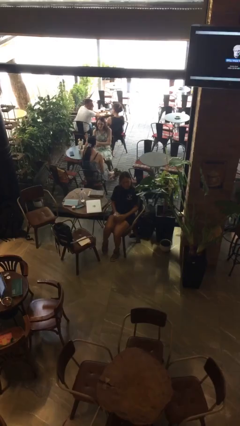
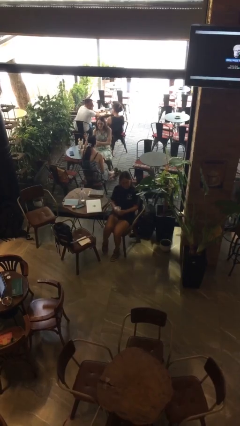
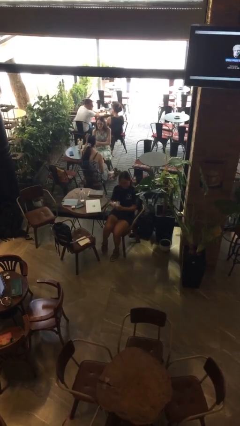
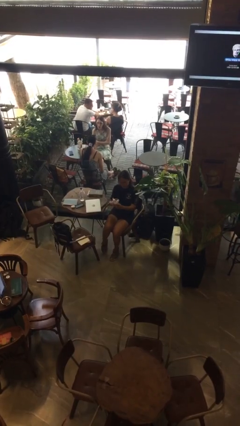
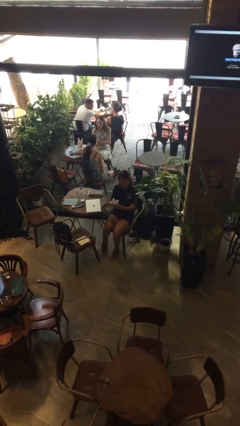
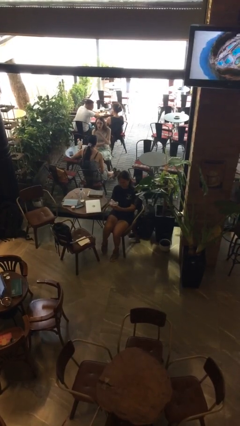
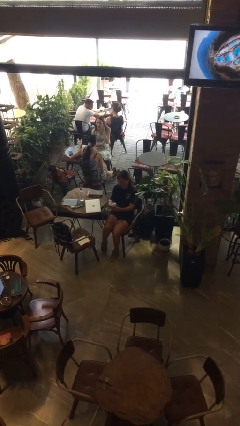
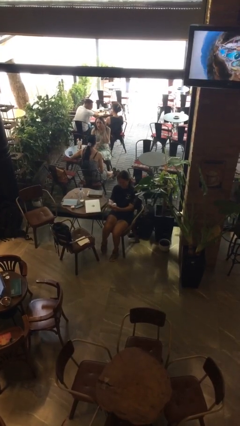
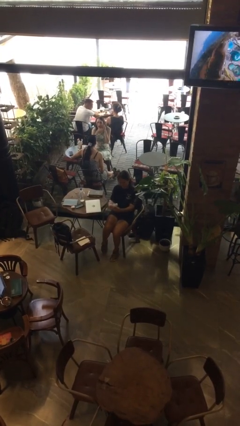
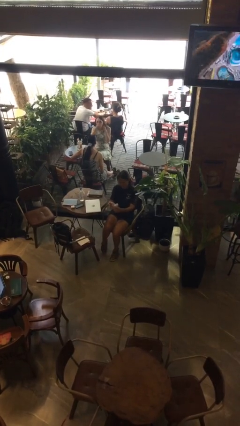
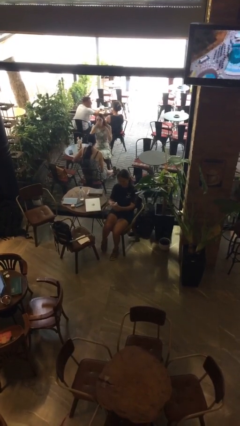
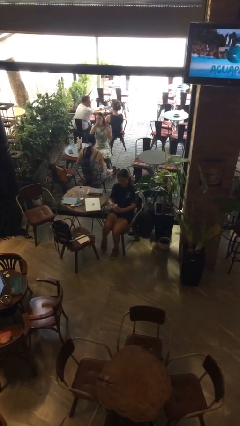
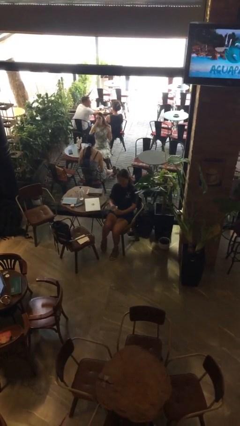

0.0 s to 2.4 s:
person squeezes object

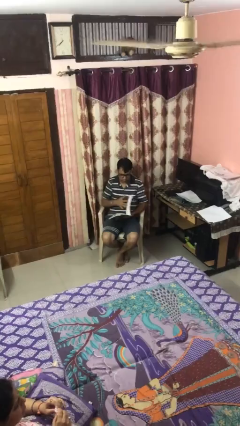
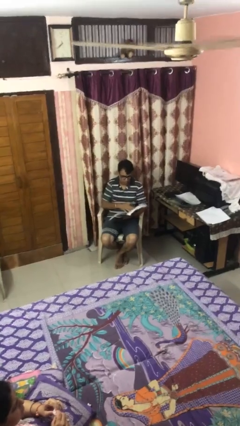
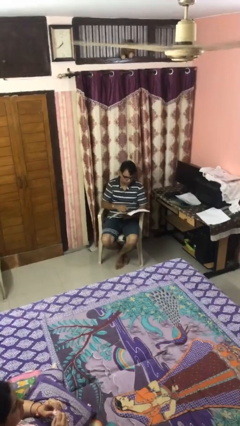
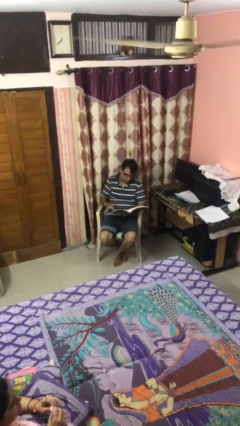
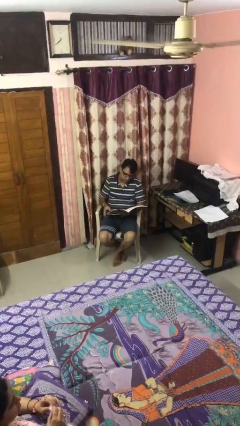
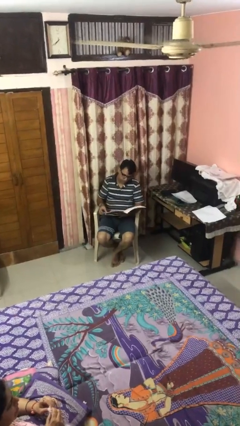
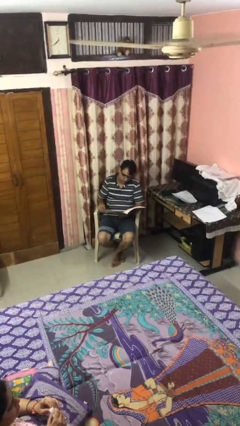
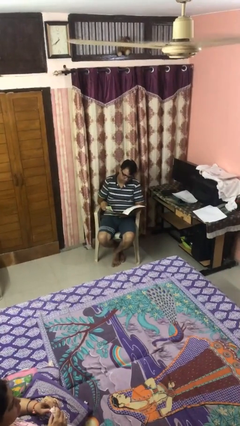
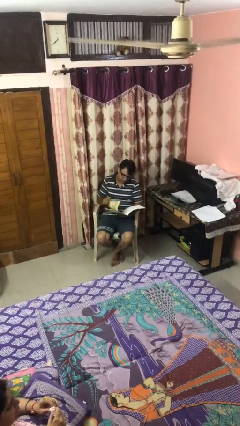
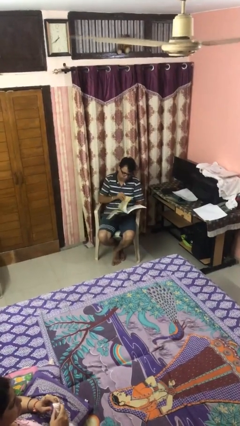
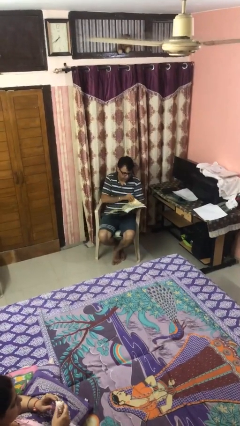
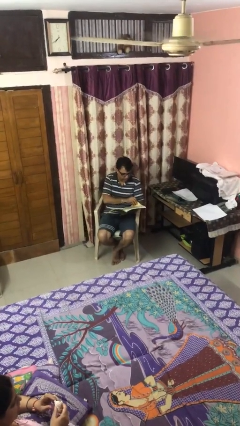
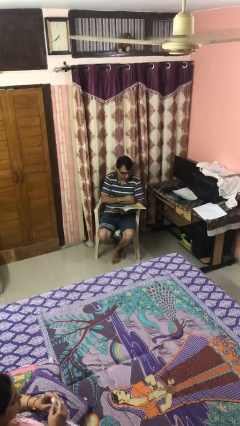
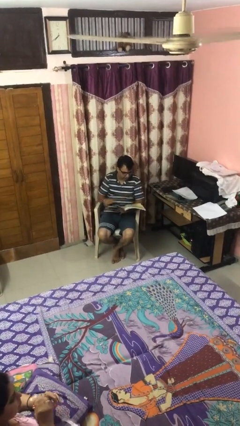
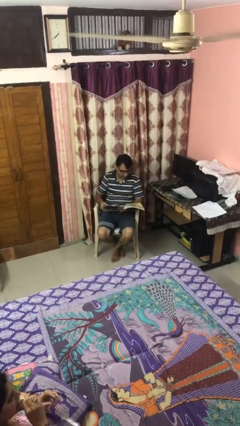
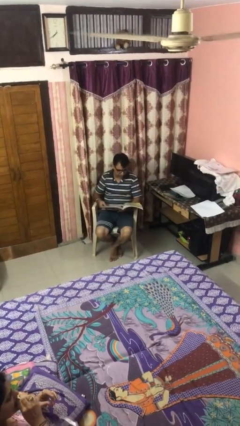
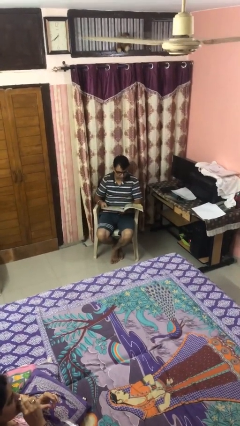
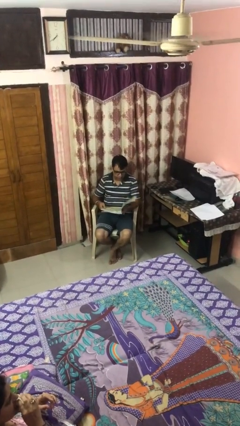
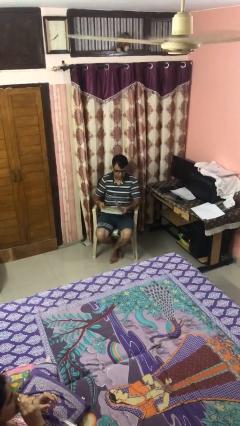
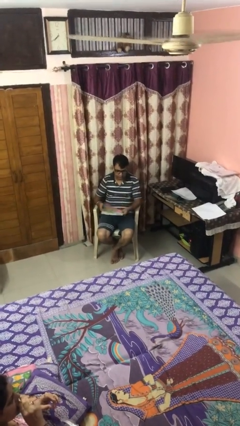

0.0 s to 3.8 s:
person reads magazine

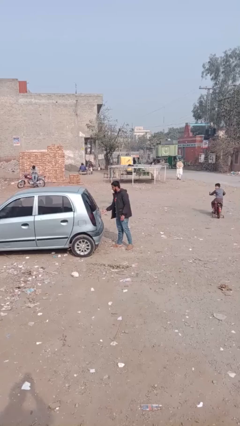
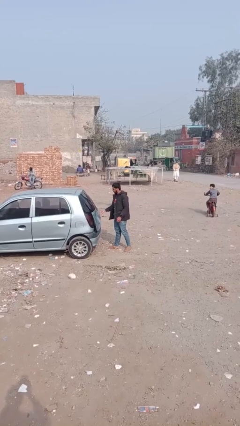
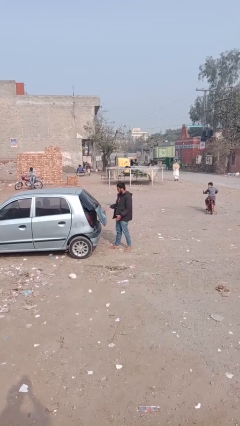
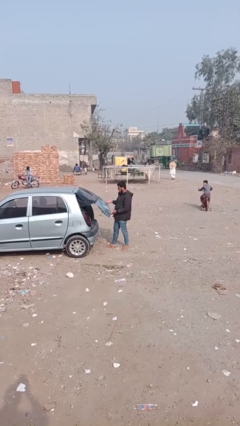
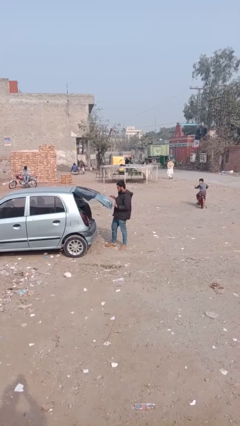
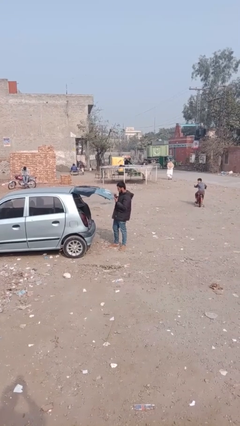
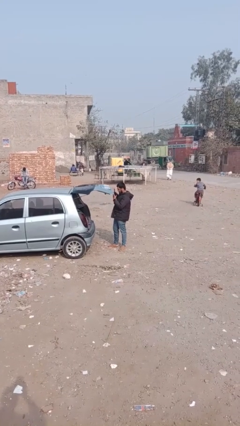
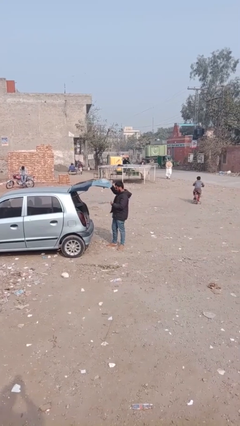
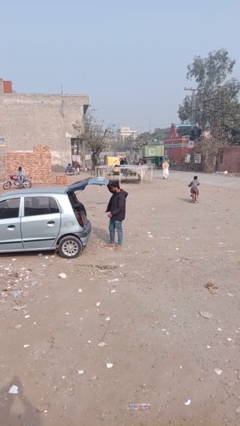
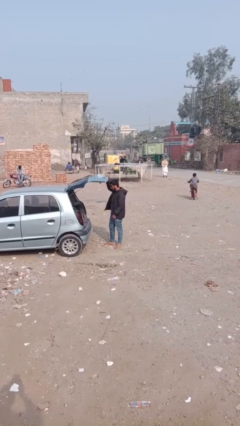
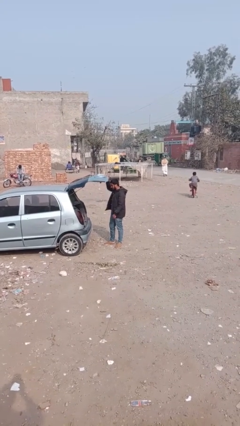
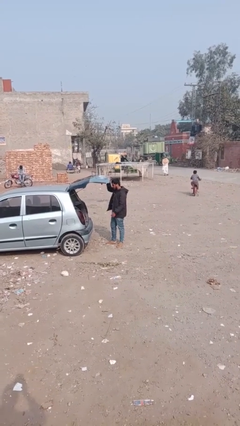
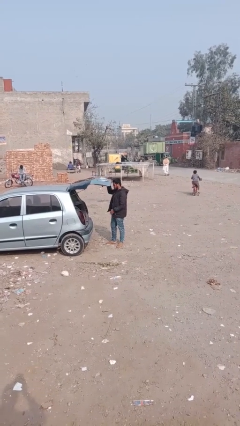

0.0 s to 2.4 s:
person opens car trunk

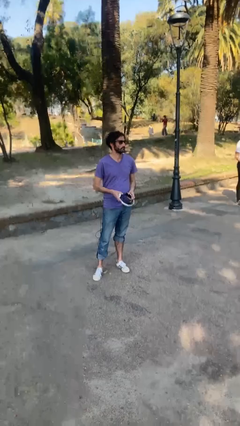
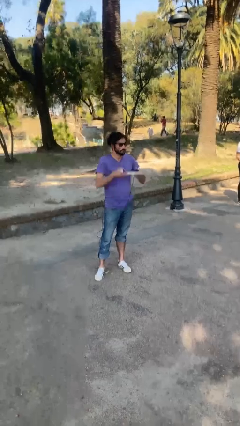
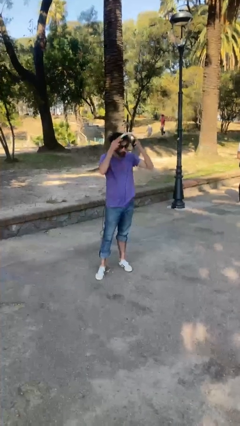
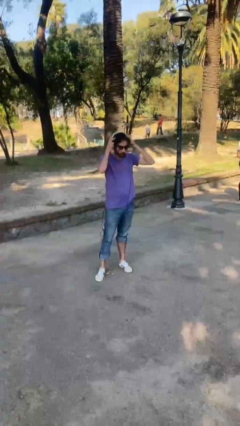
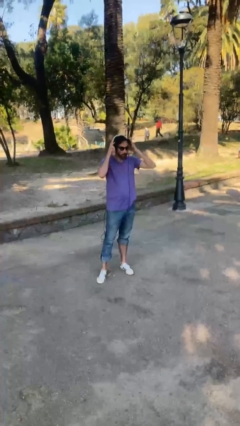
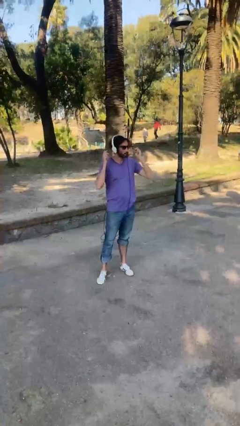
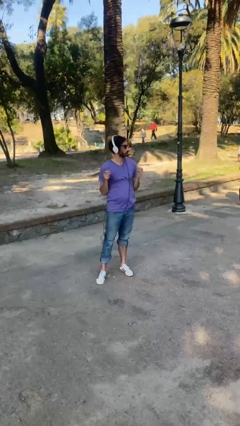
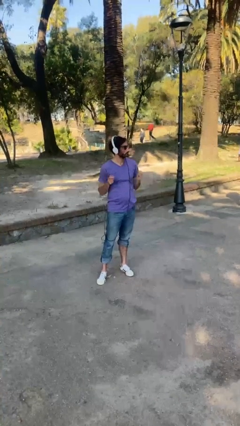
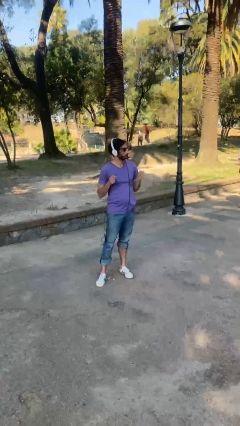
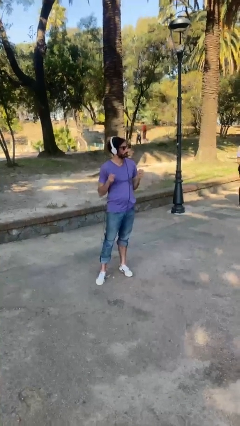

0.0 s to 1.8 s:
person puts on headphones

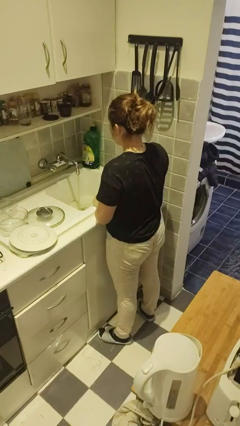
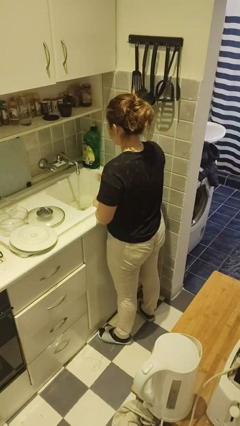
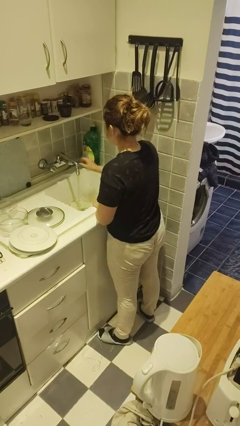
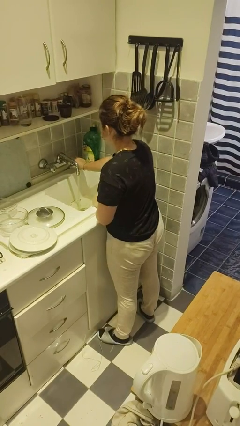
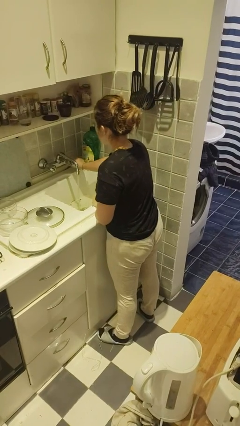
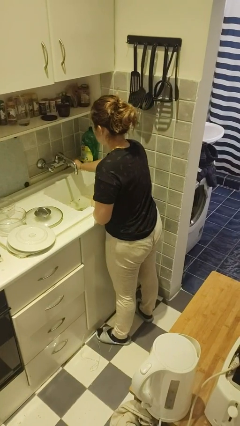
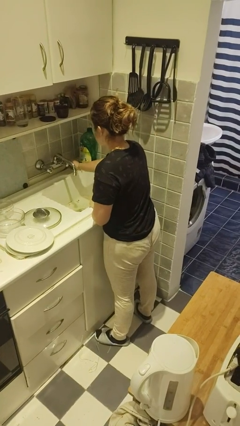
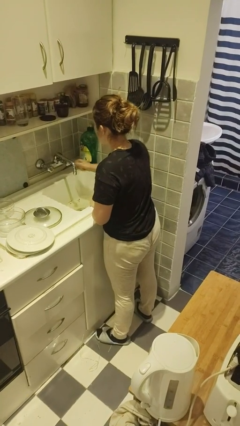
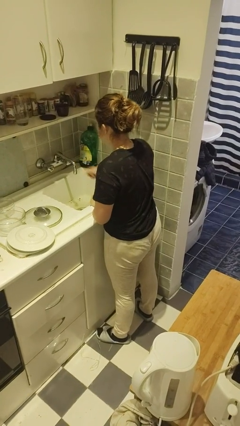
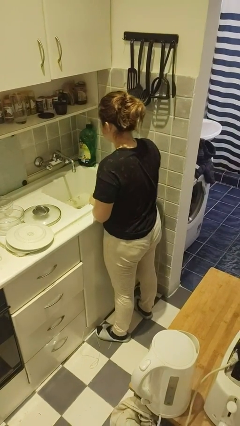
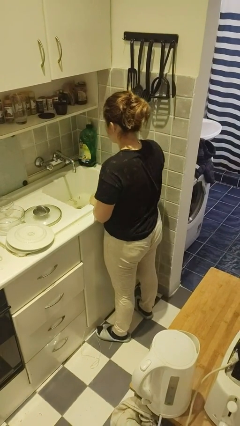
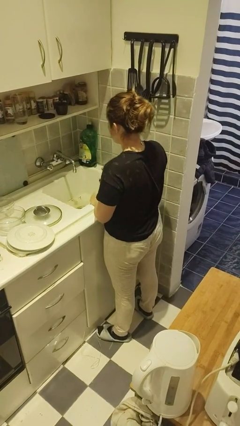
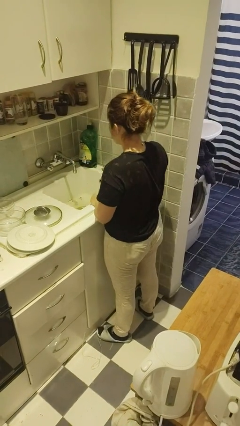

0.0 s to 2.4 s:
person turns off faucet

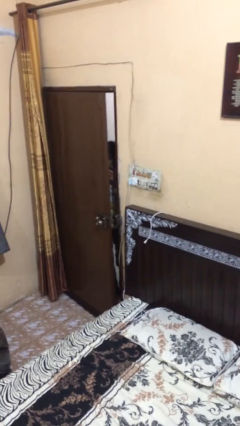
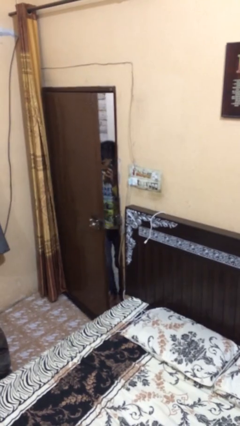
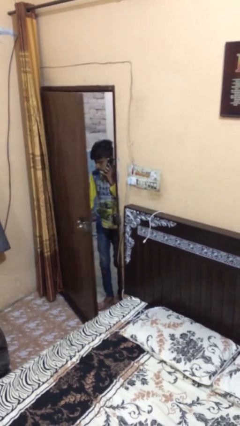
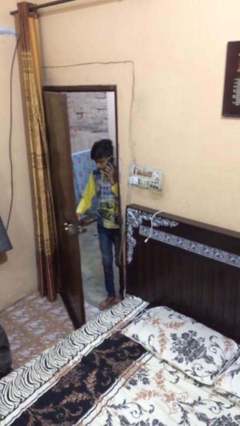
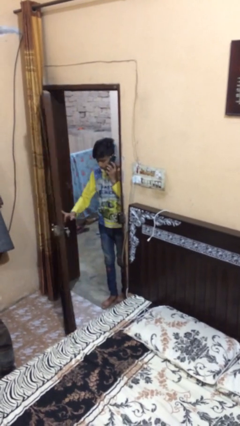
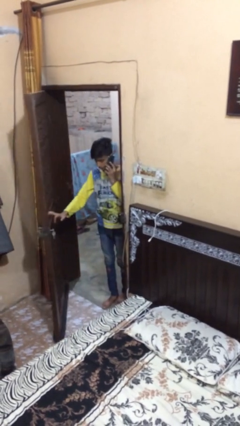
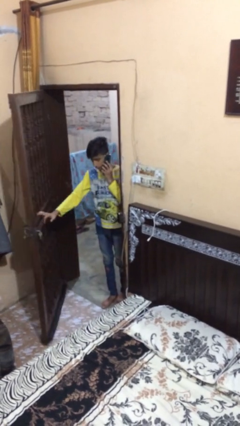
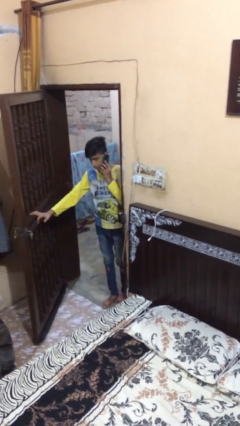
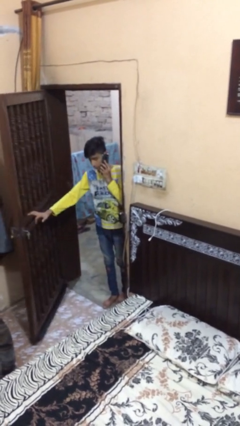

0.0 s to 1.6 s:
person opens facility door

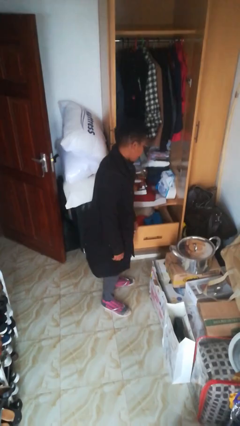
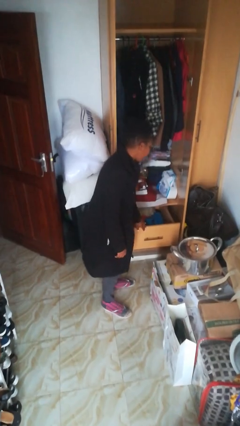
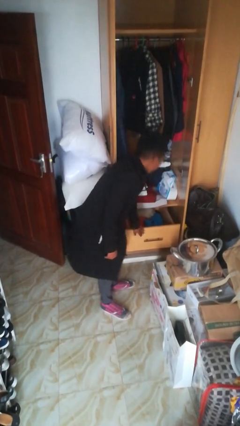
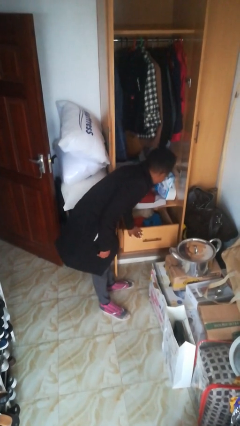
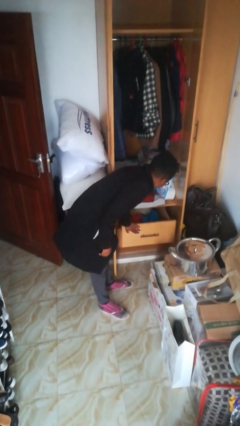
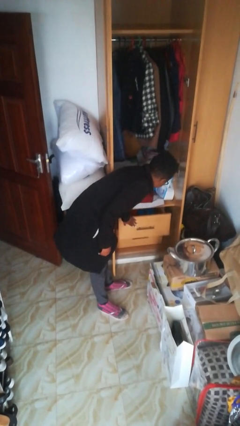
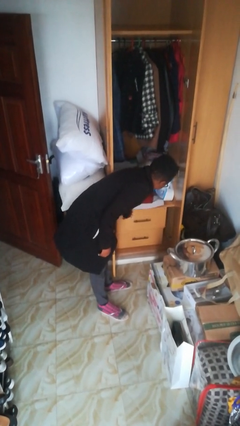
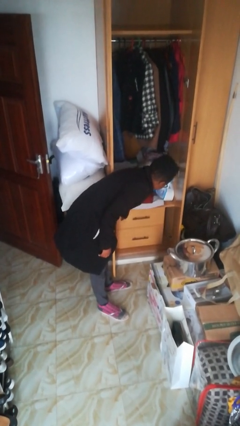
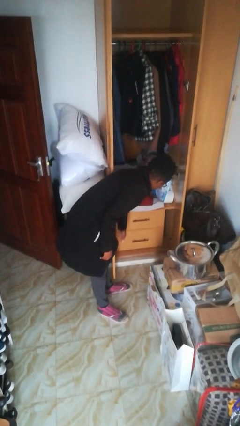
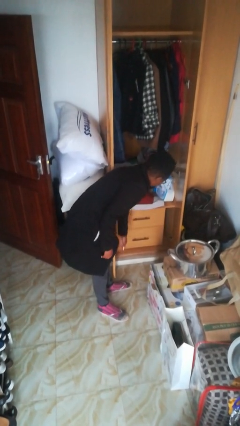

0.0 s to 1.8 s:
person closes dresser drawer

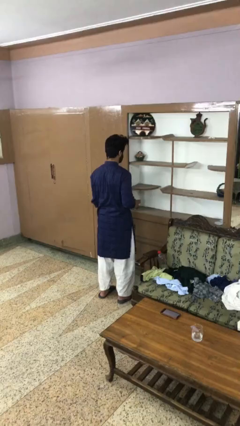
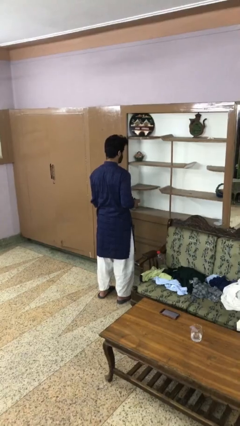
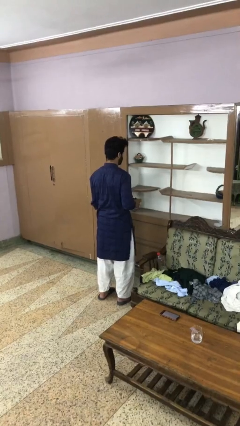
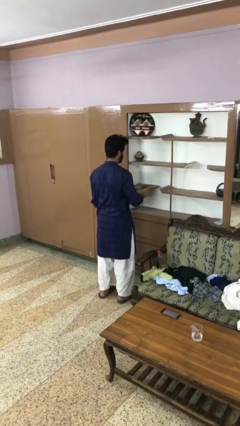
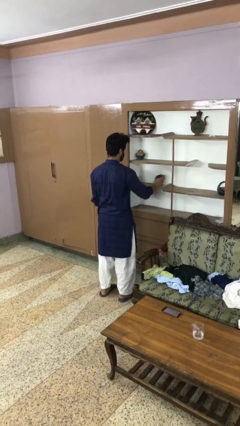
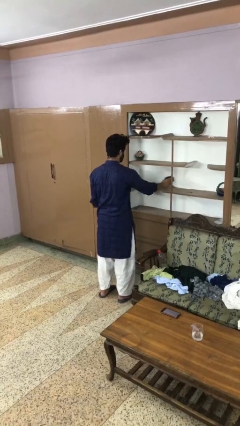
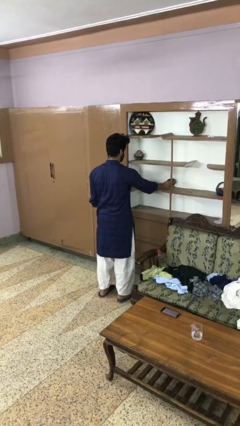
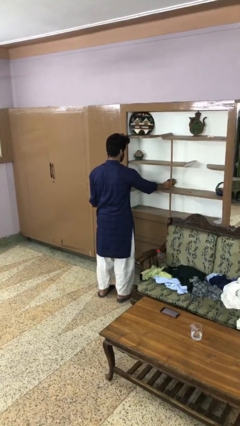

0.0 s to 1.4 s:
person puts down object on shelf
